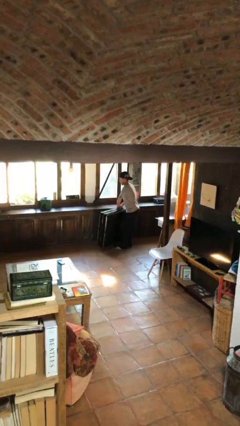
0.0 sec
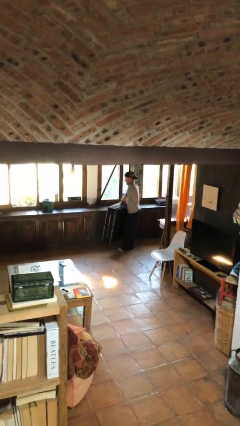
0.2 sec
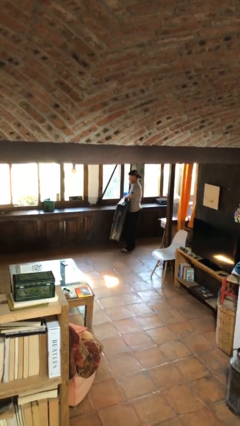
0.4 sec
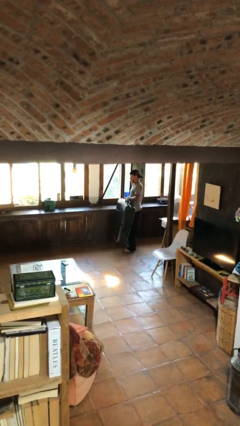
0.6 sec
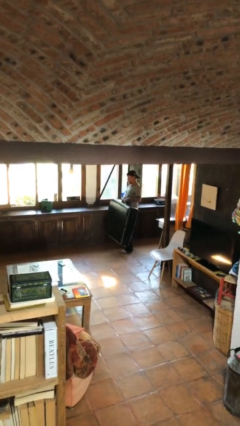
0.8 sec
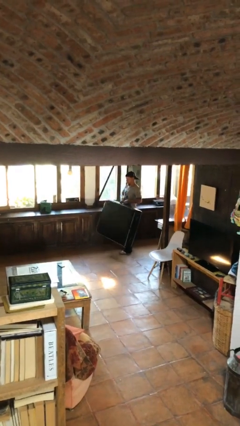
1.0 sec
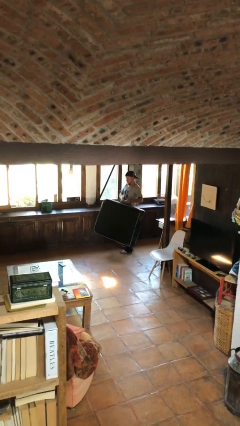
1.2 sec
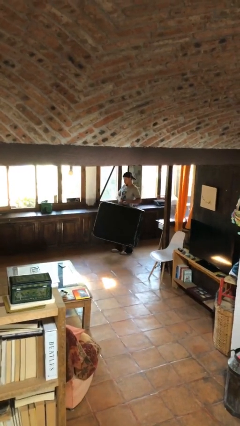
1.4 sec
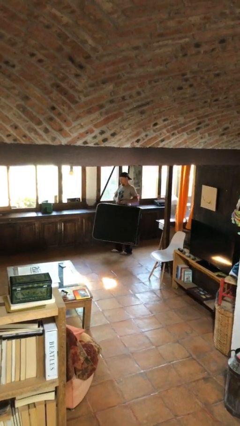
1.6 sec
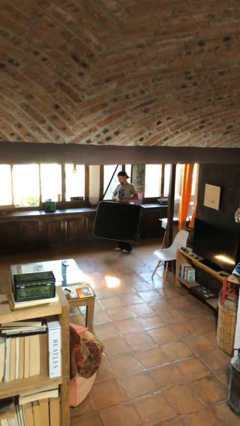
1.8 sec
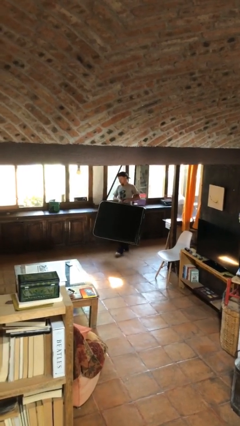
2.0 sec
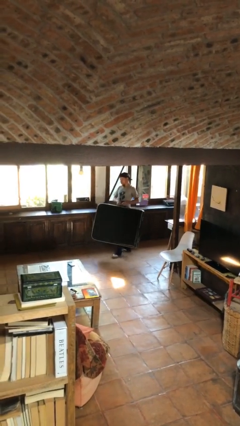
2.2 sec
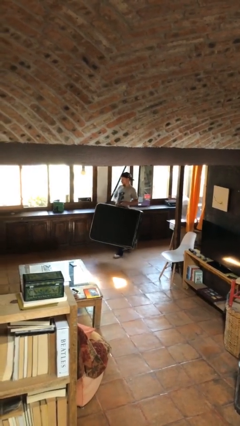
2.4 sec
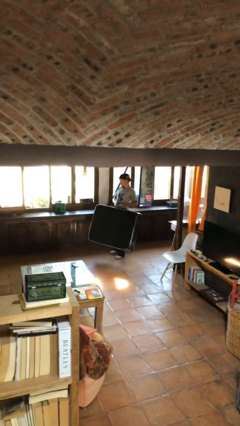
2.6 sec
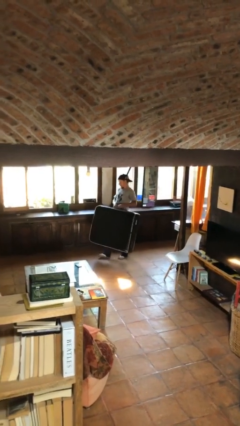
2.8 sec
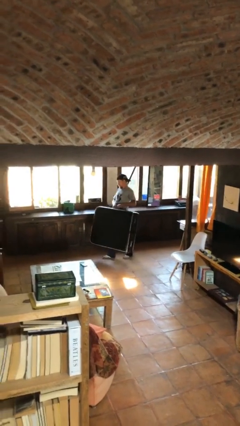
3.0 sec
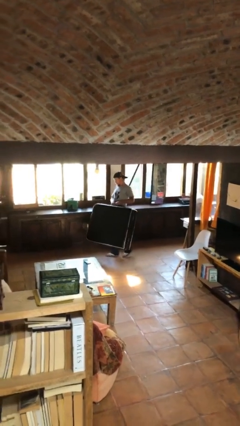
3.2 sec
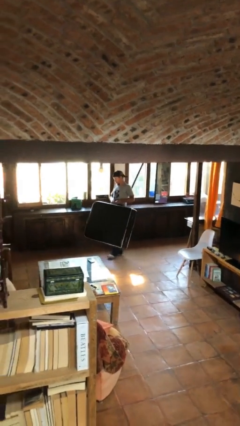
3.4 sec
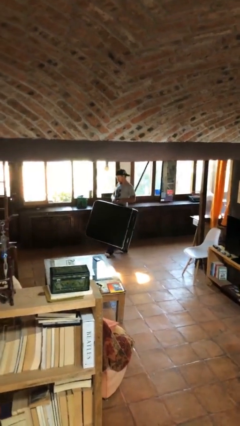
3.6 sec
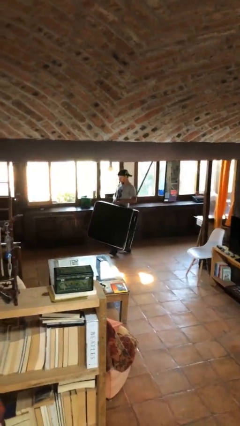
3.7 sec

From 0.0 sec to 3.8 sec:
person carries heavy object

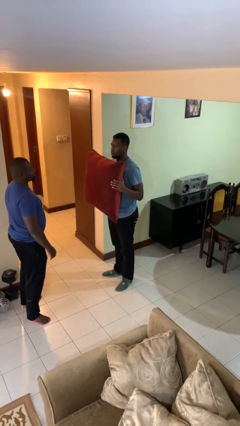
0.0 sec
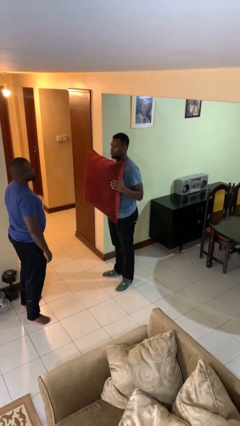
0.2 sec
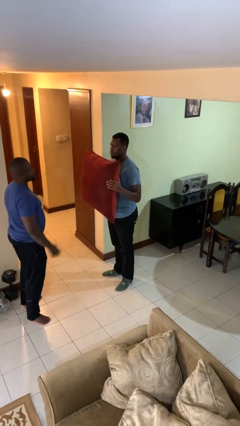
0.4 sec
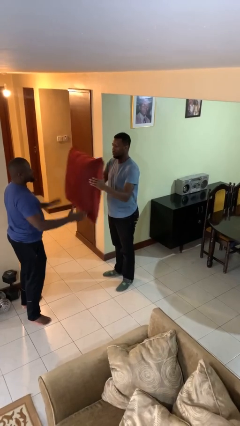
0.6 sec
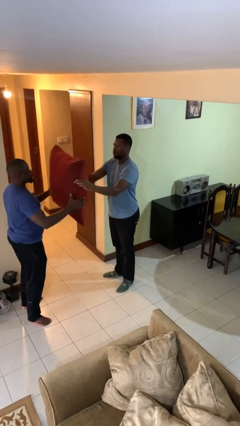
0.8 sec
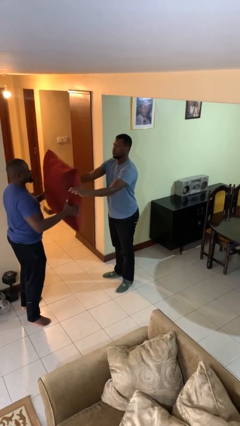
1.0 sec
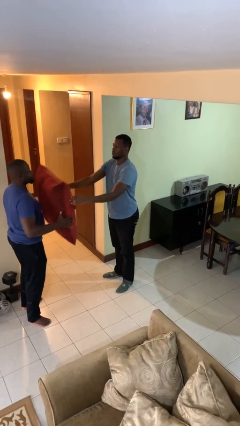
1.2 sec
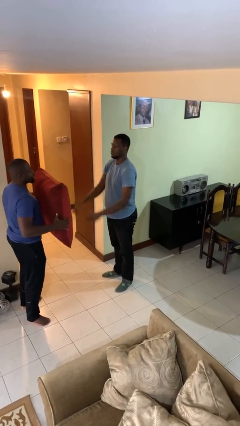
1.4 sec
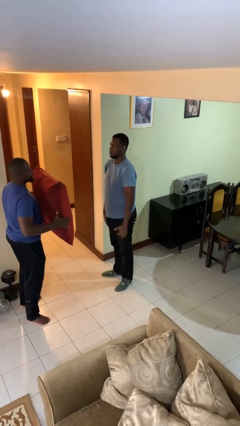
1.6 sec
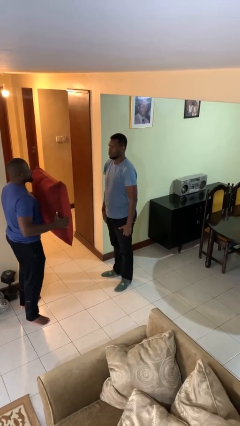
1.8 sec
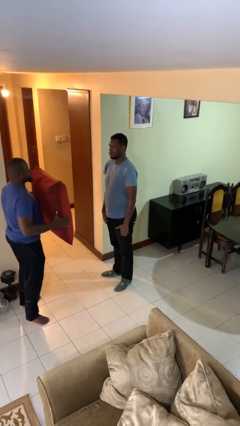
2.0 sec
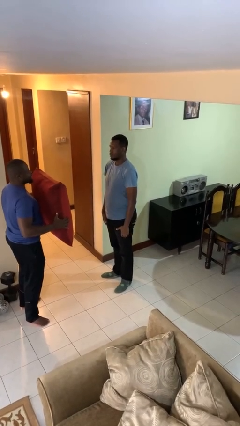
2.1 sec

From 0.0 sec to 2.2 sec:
person transfers object to person

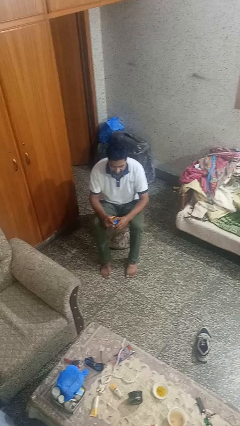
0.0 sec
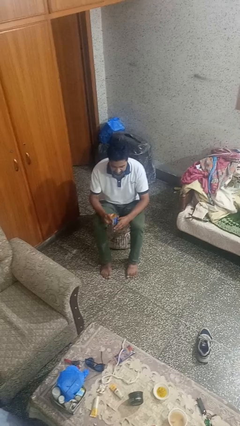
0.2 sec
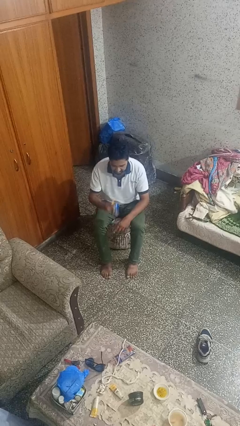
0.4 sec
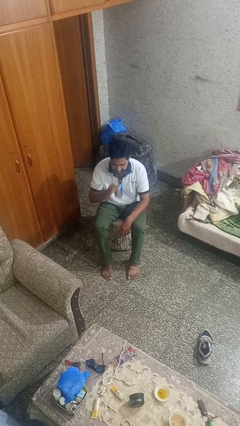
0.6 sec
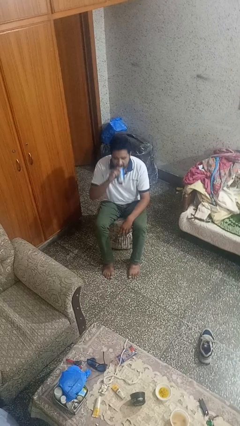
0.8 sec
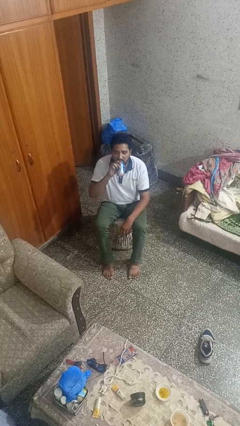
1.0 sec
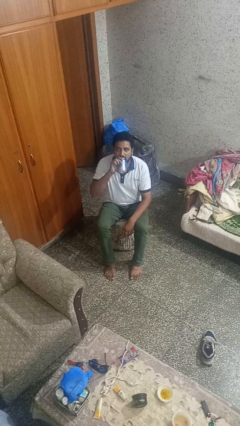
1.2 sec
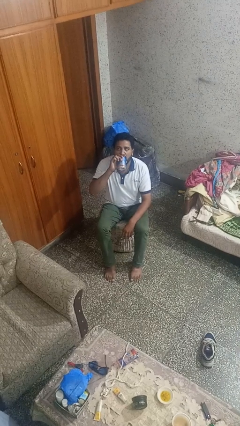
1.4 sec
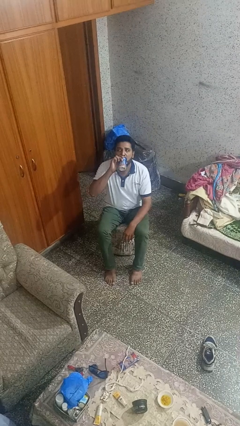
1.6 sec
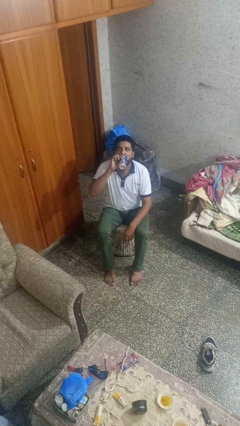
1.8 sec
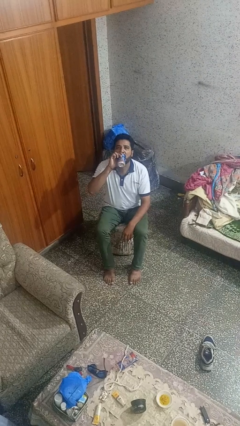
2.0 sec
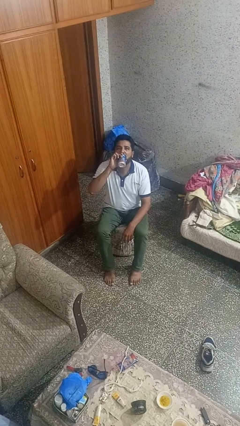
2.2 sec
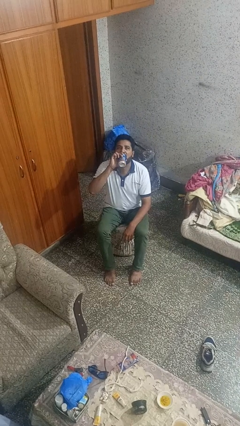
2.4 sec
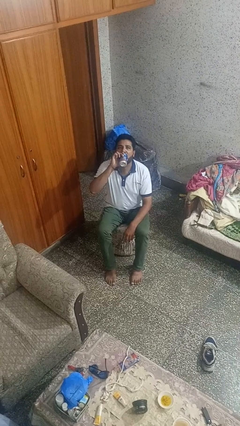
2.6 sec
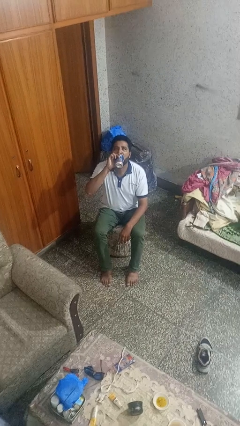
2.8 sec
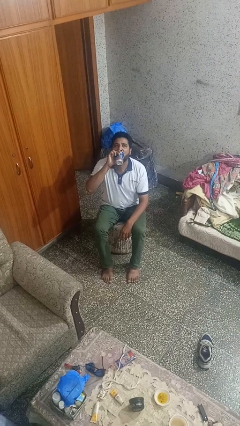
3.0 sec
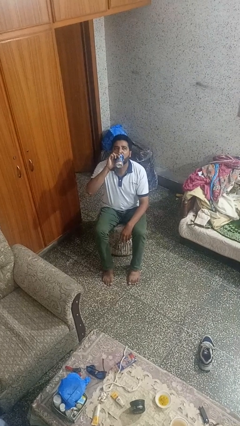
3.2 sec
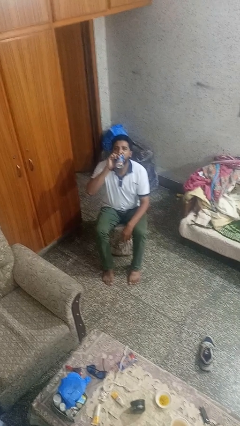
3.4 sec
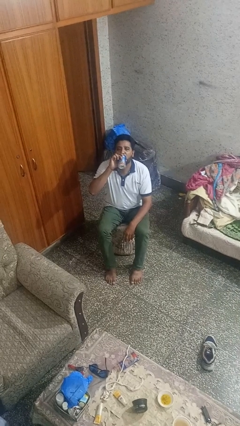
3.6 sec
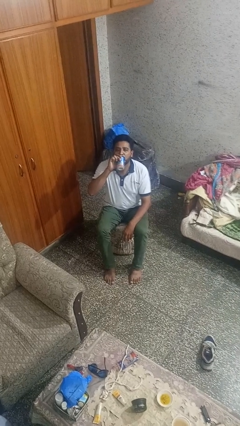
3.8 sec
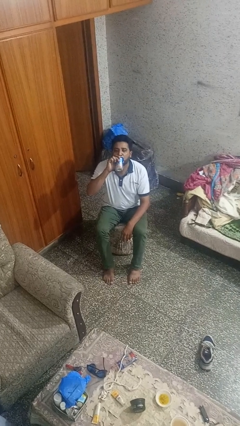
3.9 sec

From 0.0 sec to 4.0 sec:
person drinks from beverage can

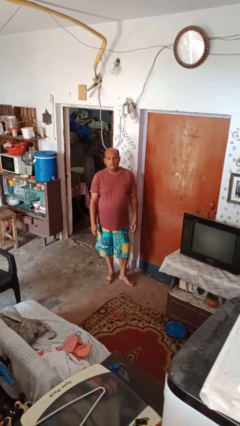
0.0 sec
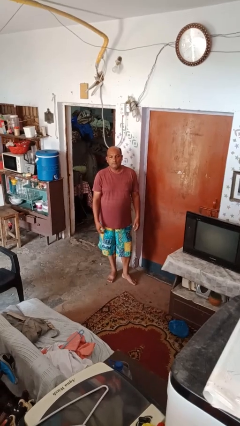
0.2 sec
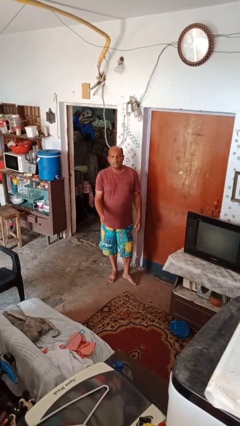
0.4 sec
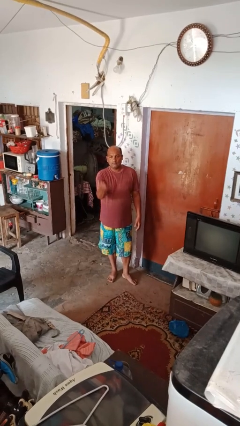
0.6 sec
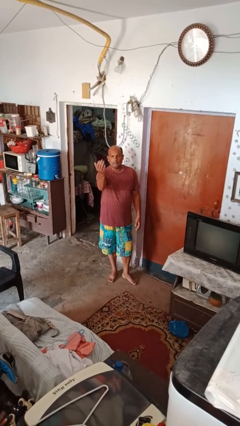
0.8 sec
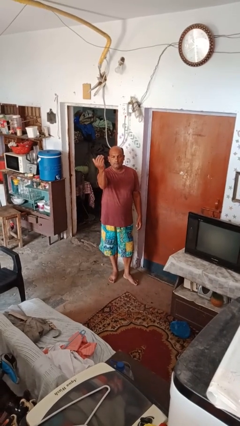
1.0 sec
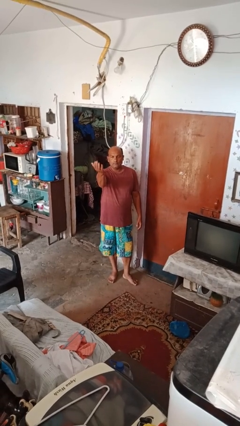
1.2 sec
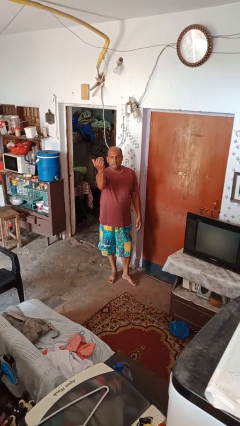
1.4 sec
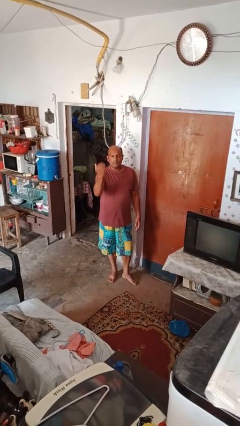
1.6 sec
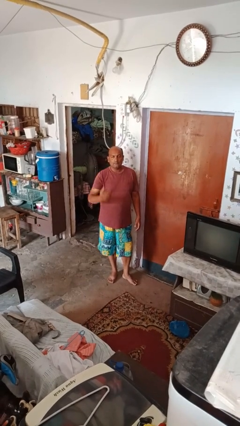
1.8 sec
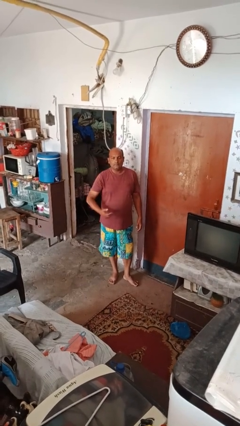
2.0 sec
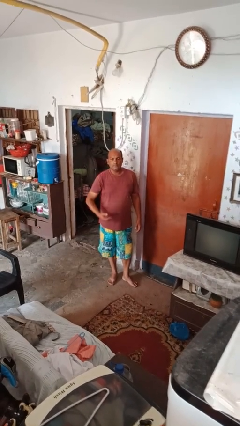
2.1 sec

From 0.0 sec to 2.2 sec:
person gestures come here

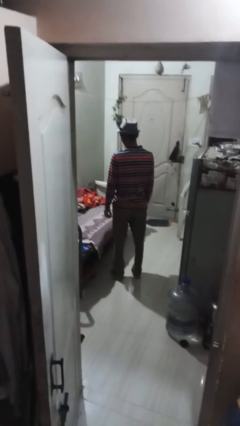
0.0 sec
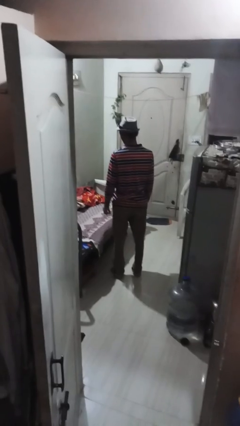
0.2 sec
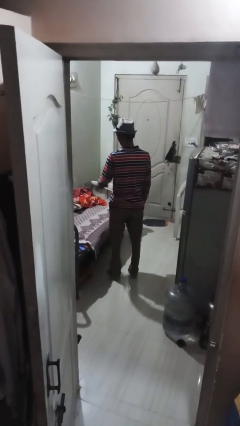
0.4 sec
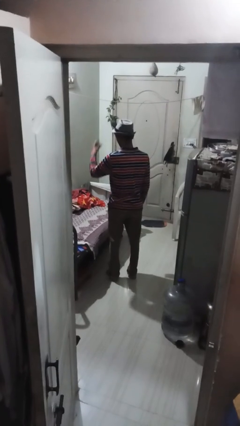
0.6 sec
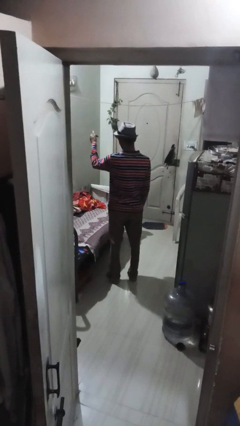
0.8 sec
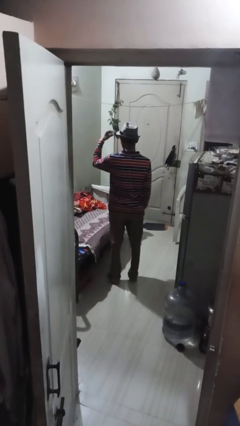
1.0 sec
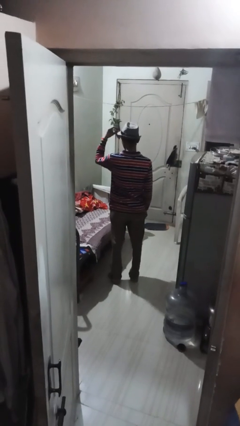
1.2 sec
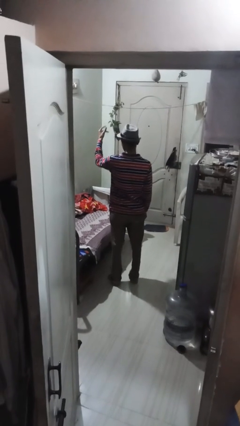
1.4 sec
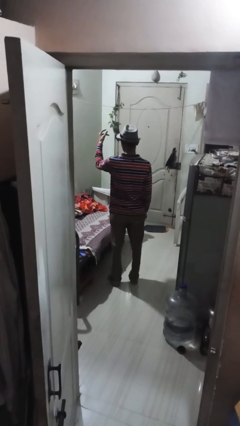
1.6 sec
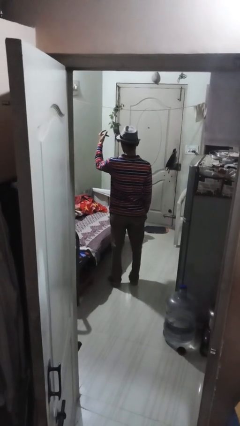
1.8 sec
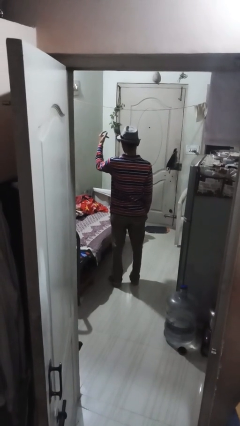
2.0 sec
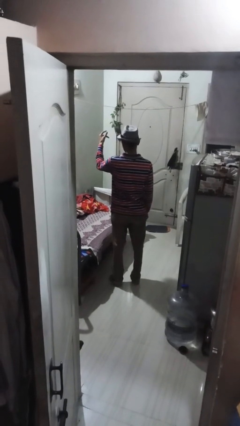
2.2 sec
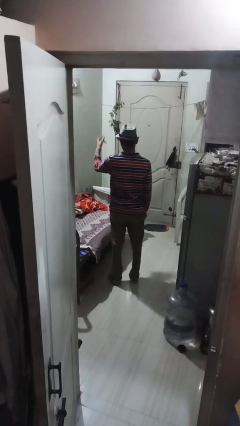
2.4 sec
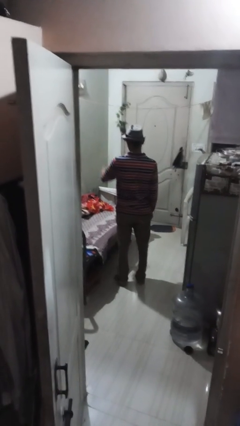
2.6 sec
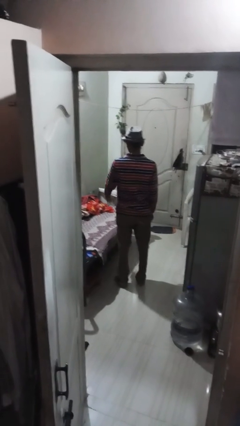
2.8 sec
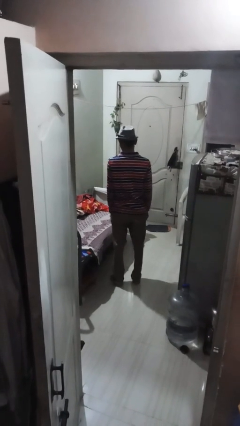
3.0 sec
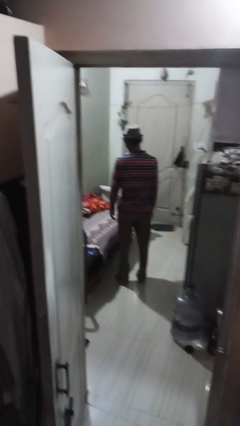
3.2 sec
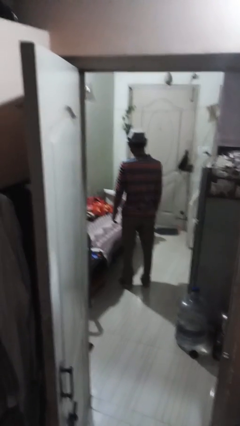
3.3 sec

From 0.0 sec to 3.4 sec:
person snaps fingers

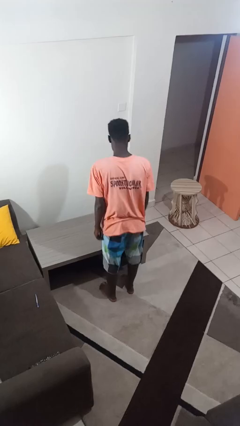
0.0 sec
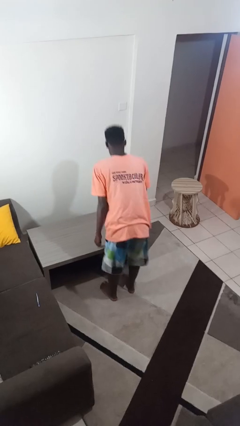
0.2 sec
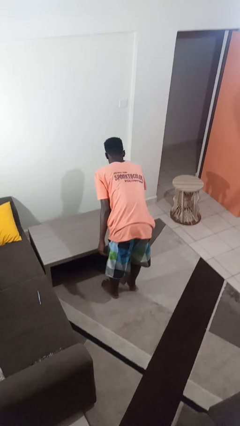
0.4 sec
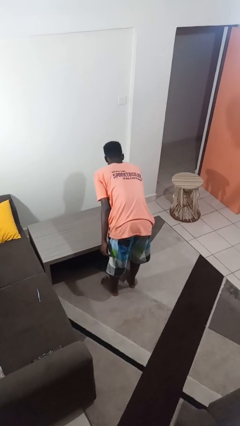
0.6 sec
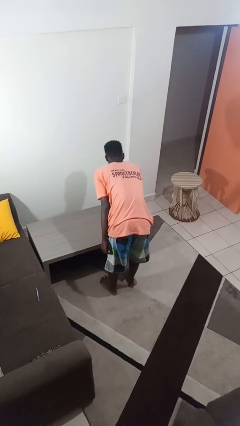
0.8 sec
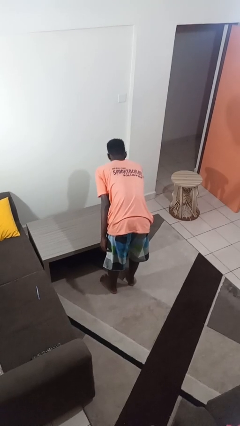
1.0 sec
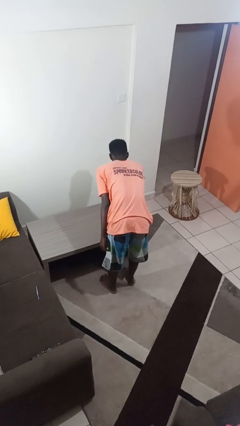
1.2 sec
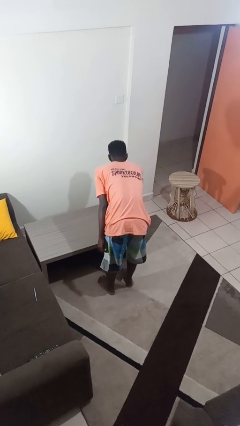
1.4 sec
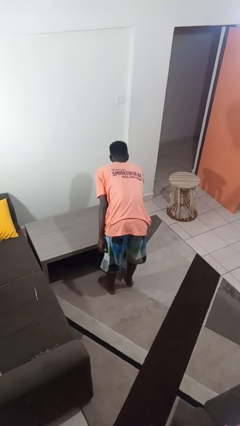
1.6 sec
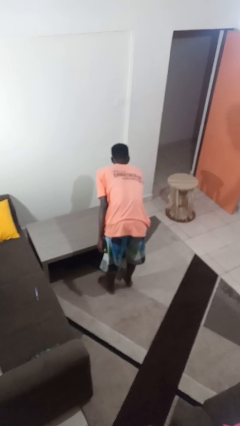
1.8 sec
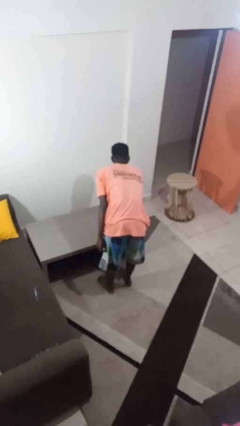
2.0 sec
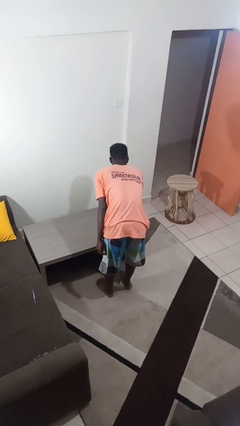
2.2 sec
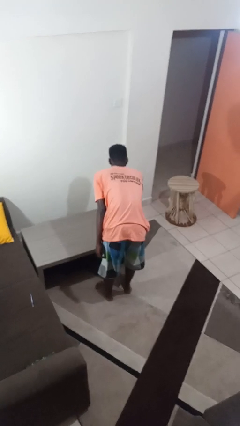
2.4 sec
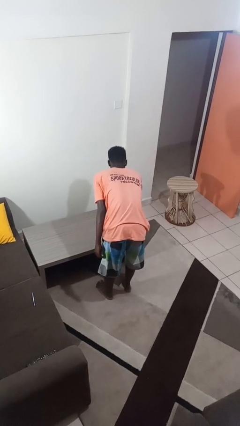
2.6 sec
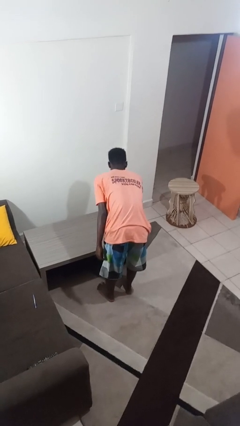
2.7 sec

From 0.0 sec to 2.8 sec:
person sprays from bottle
